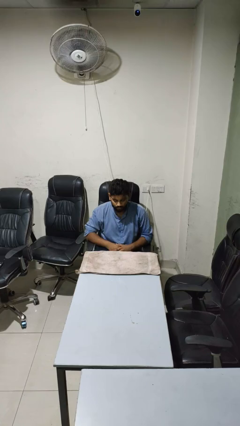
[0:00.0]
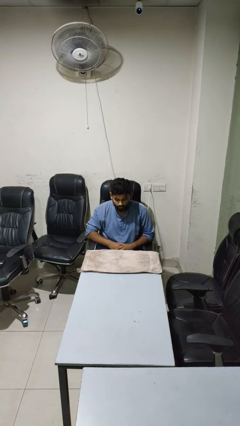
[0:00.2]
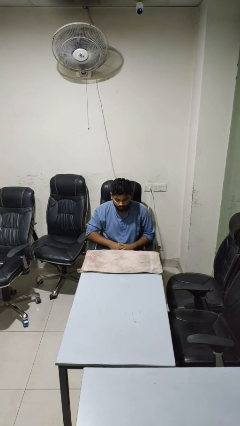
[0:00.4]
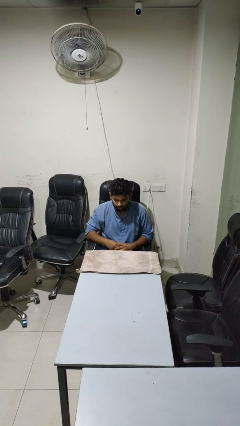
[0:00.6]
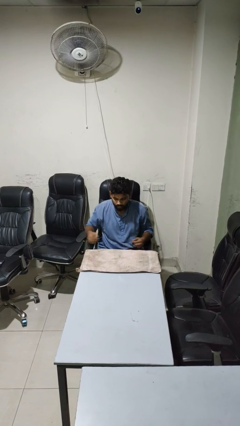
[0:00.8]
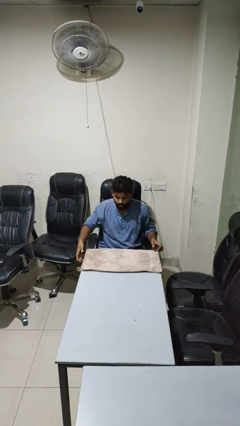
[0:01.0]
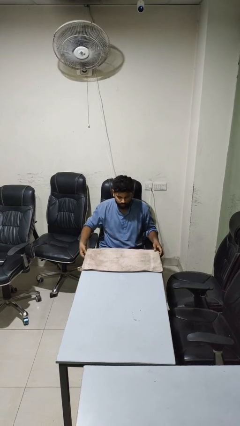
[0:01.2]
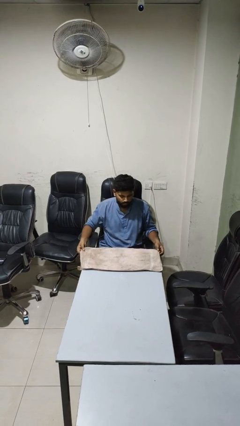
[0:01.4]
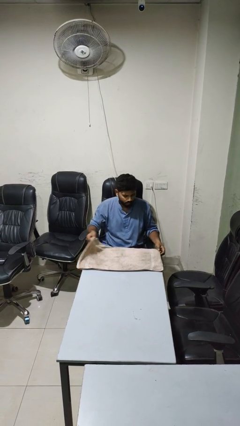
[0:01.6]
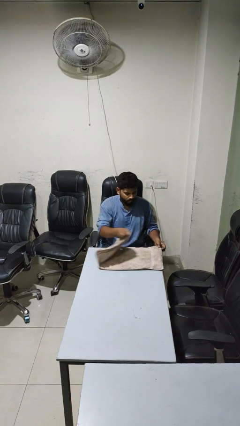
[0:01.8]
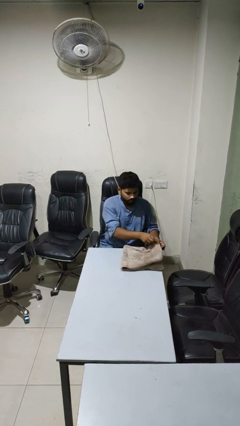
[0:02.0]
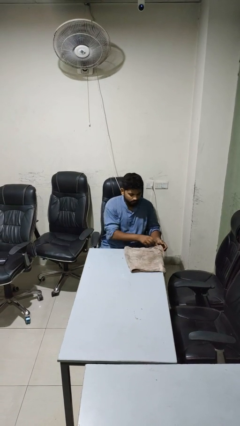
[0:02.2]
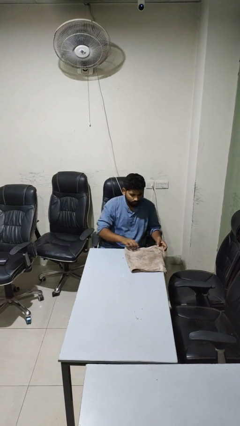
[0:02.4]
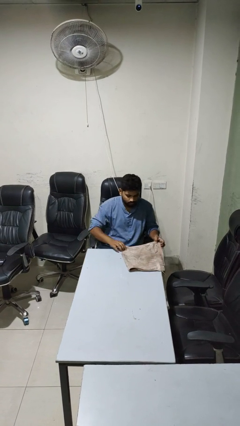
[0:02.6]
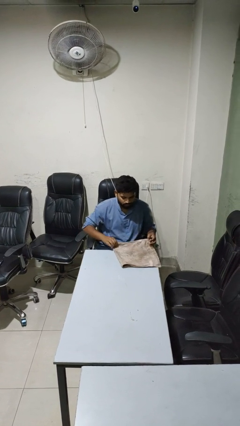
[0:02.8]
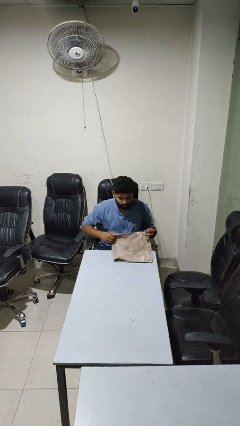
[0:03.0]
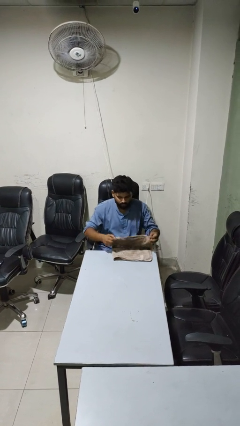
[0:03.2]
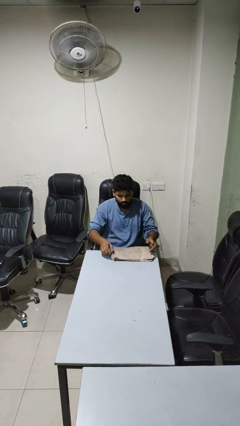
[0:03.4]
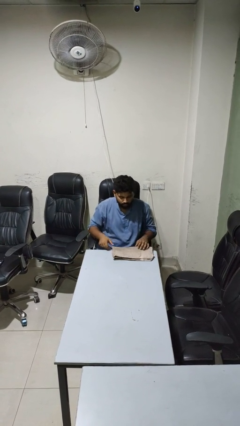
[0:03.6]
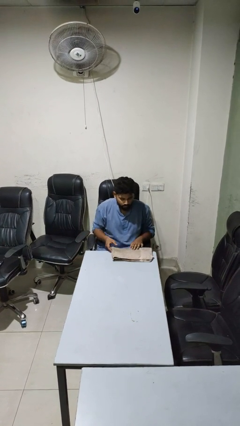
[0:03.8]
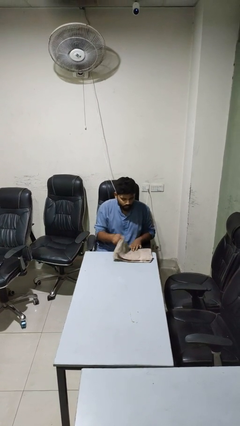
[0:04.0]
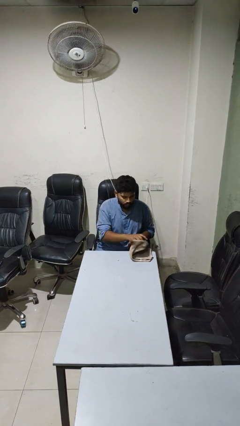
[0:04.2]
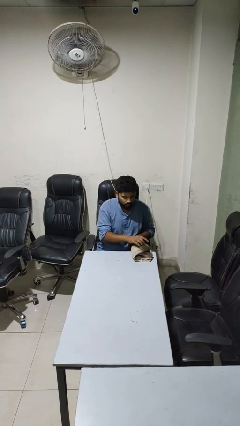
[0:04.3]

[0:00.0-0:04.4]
person folds tablecloth

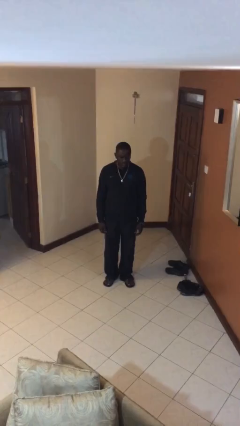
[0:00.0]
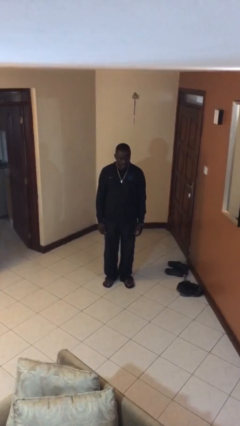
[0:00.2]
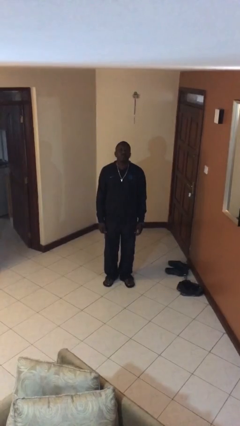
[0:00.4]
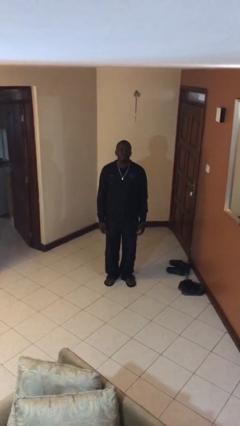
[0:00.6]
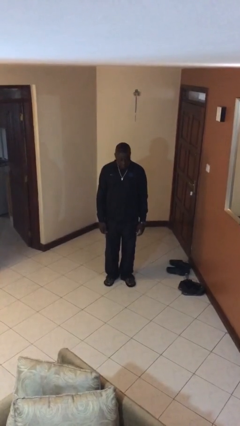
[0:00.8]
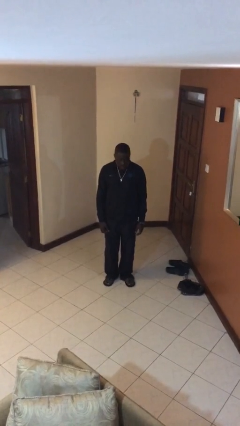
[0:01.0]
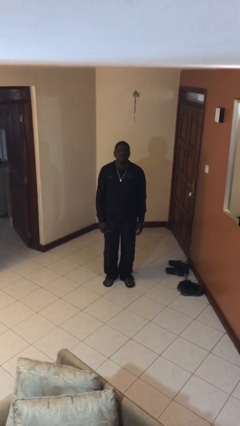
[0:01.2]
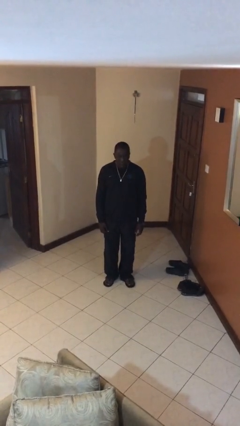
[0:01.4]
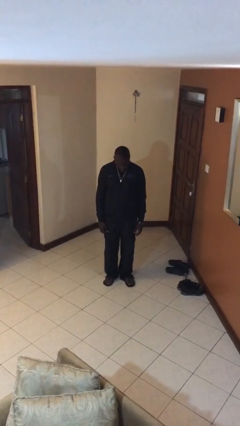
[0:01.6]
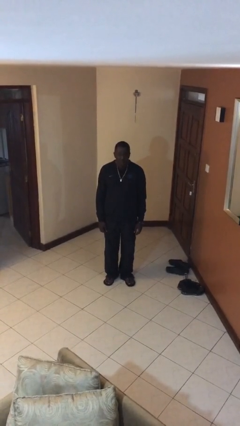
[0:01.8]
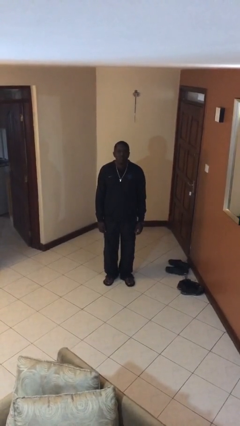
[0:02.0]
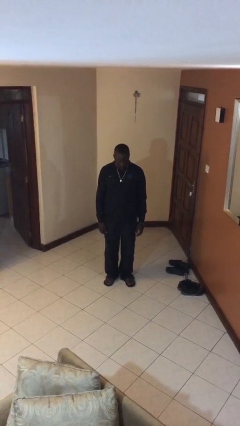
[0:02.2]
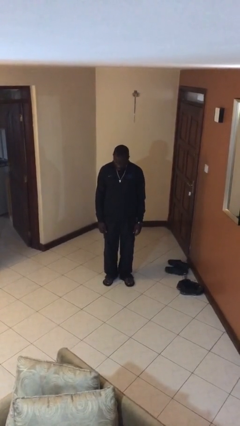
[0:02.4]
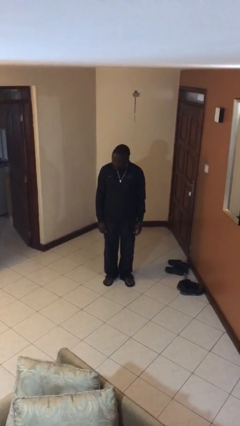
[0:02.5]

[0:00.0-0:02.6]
person nods head

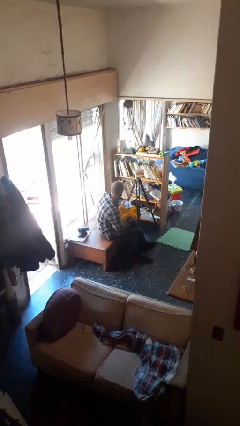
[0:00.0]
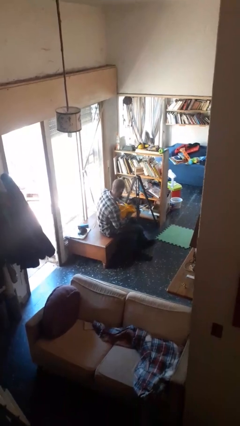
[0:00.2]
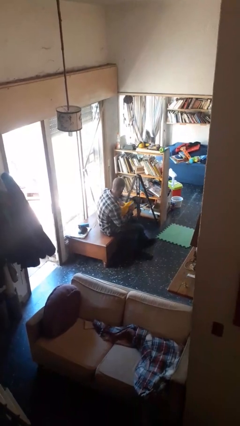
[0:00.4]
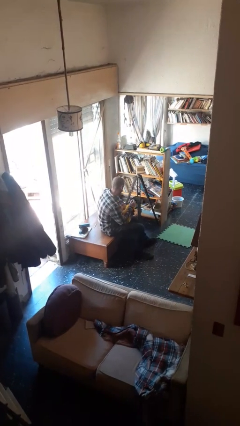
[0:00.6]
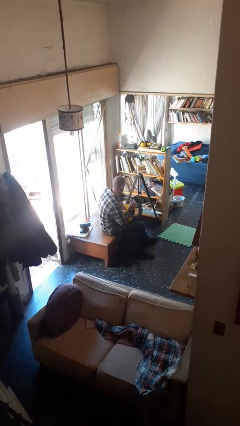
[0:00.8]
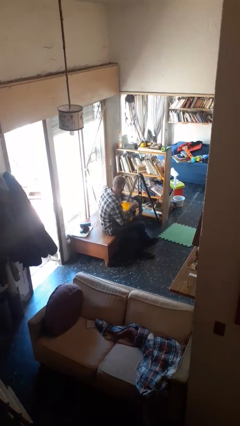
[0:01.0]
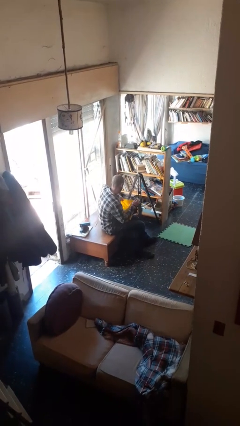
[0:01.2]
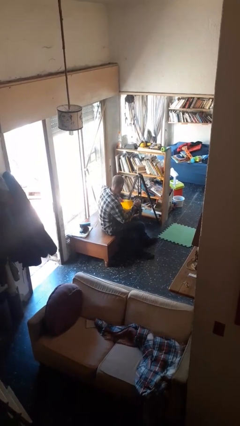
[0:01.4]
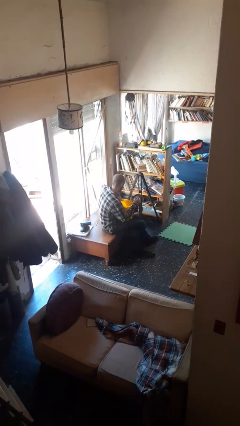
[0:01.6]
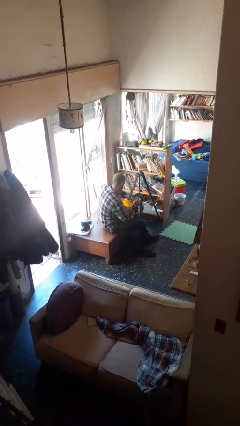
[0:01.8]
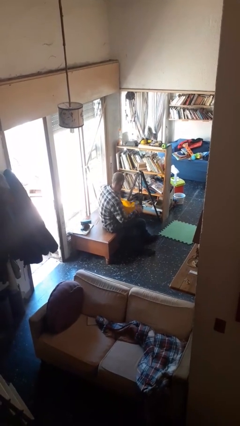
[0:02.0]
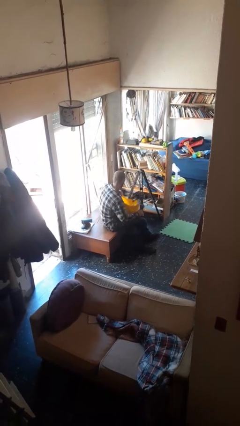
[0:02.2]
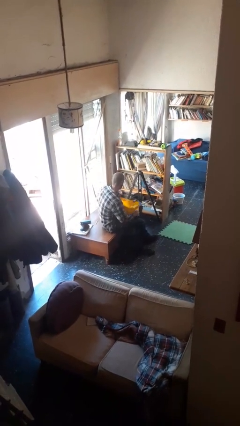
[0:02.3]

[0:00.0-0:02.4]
person puts object into bag

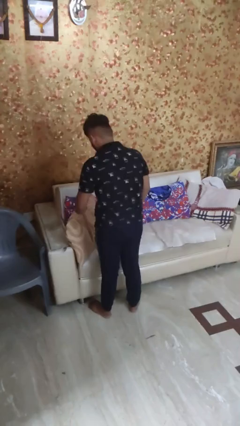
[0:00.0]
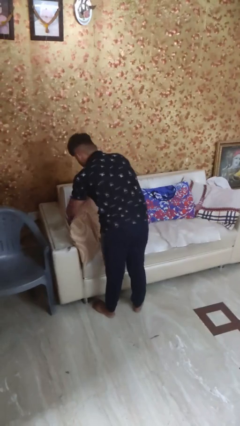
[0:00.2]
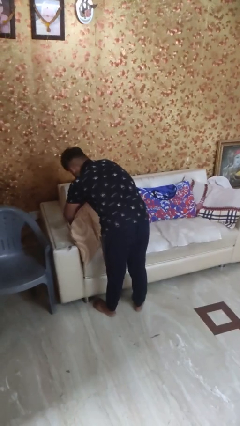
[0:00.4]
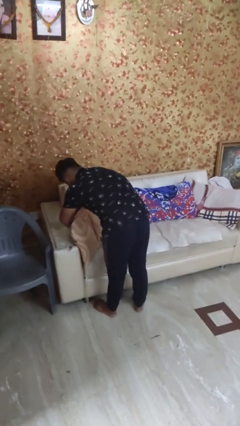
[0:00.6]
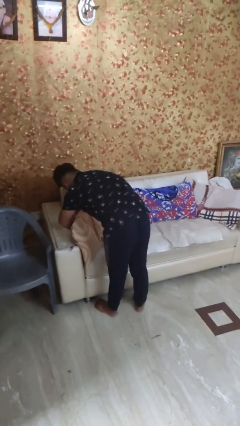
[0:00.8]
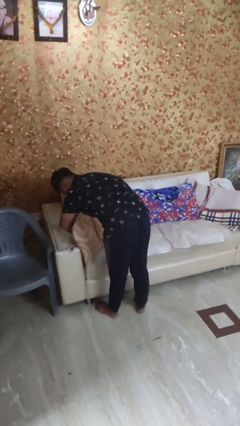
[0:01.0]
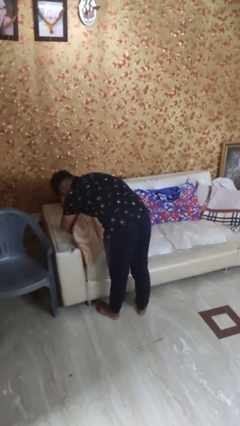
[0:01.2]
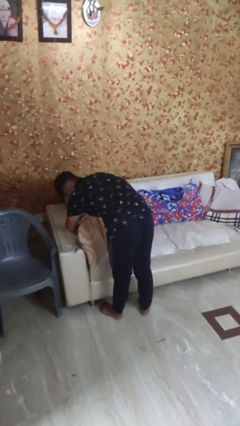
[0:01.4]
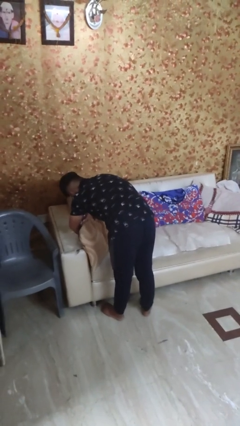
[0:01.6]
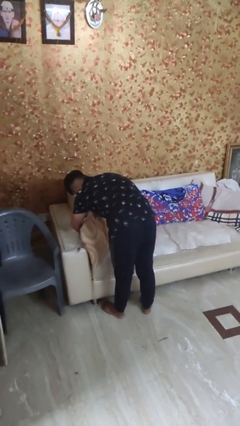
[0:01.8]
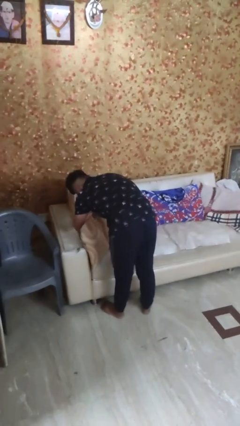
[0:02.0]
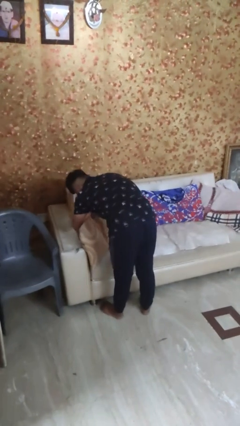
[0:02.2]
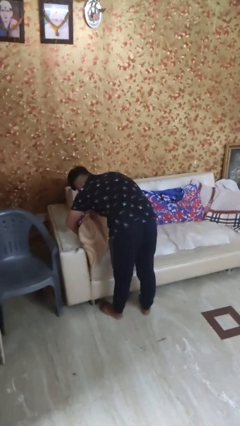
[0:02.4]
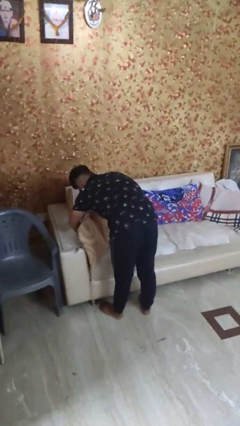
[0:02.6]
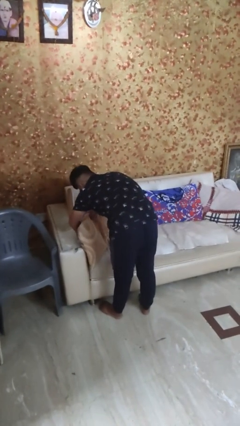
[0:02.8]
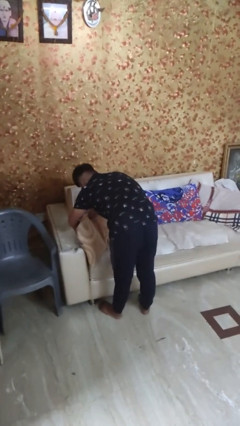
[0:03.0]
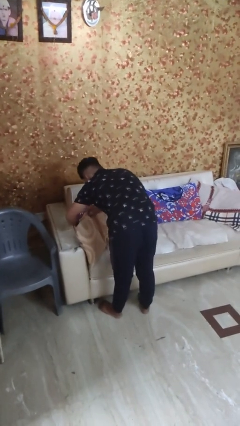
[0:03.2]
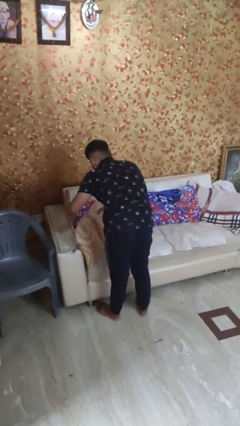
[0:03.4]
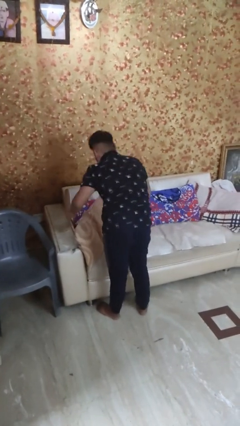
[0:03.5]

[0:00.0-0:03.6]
person searches in couch

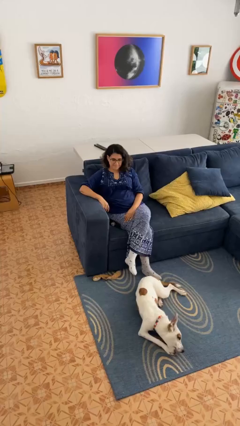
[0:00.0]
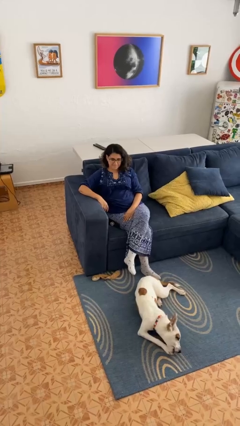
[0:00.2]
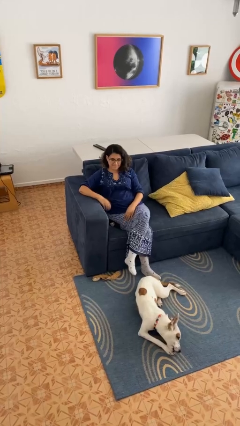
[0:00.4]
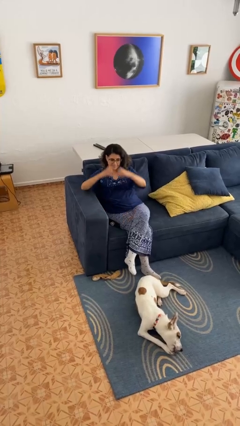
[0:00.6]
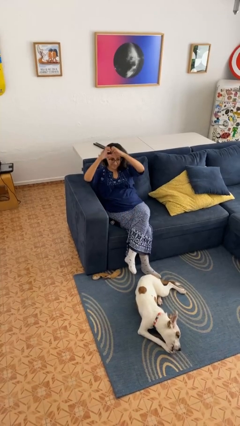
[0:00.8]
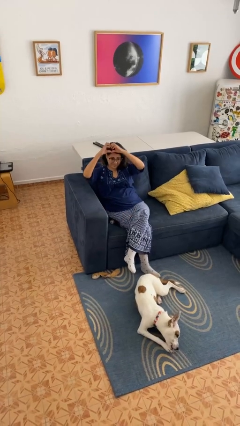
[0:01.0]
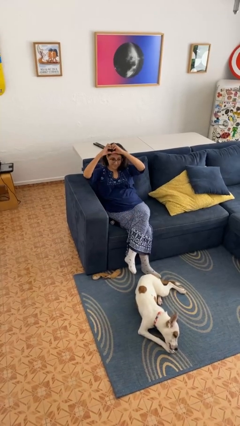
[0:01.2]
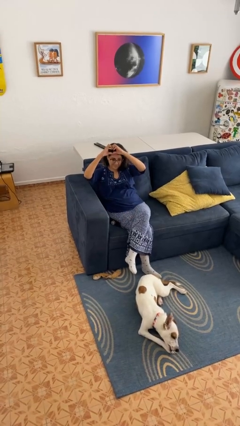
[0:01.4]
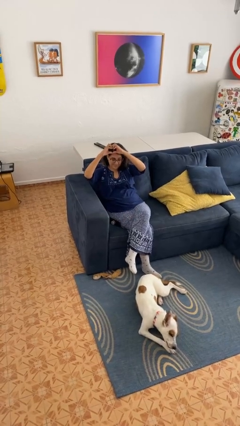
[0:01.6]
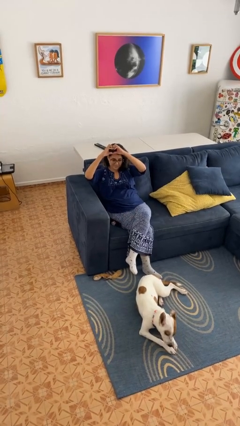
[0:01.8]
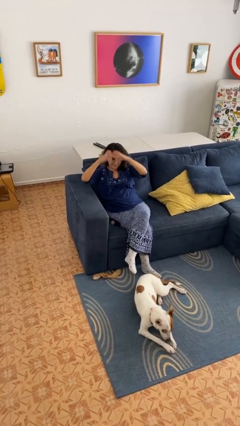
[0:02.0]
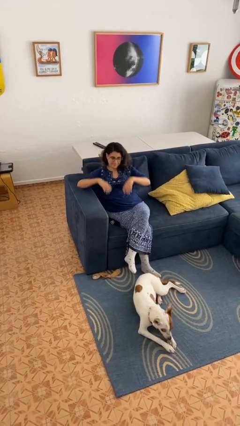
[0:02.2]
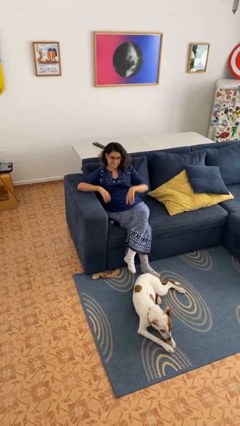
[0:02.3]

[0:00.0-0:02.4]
person gestures heart

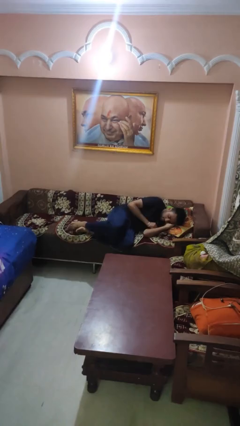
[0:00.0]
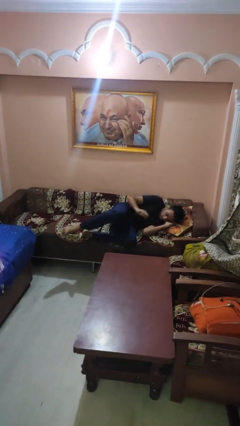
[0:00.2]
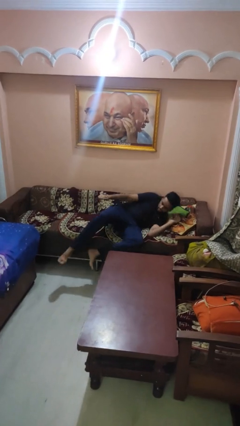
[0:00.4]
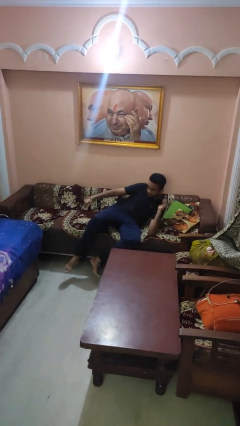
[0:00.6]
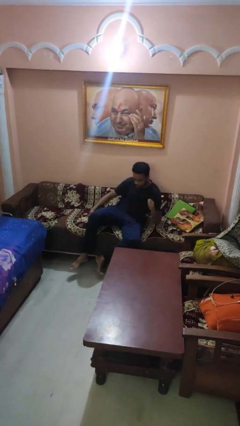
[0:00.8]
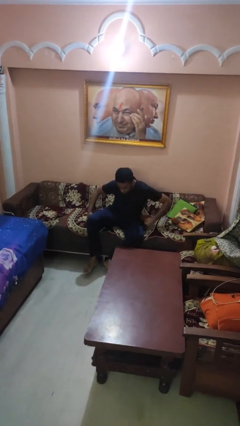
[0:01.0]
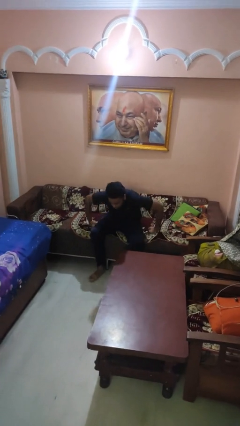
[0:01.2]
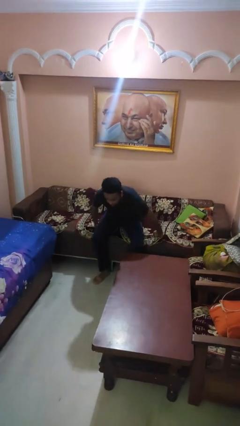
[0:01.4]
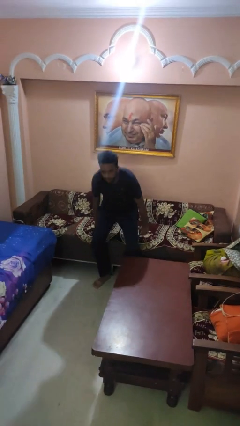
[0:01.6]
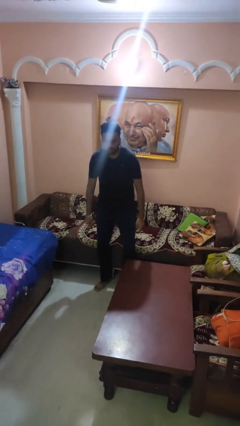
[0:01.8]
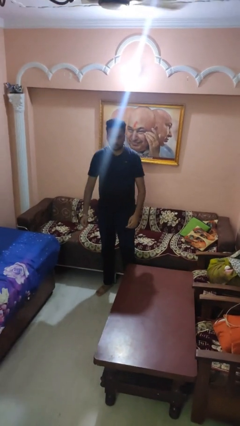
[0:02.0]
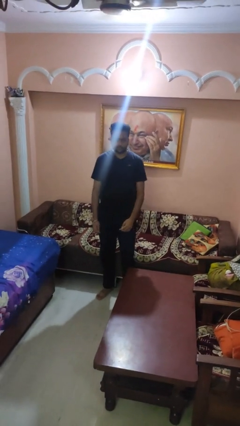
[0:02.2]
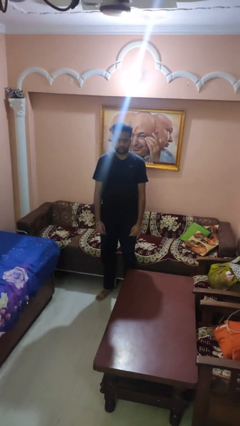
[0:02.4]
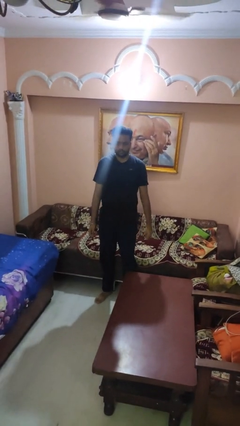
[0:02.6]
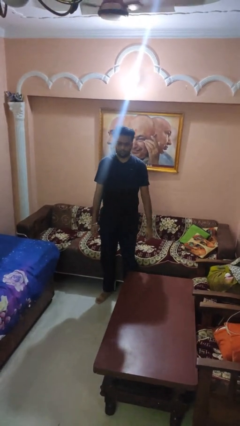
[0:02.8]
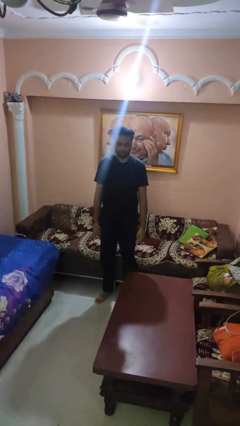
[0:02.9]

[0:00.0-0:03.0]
person stands up
